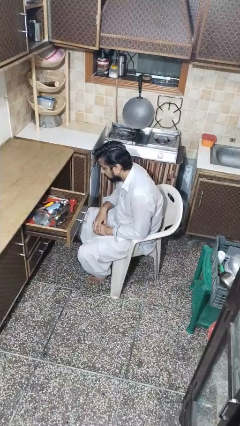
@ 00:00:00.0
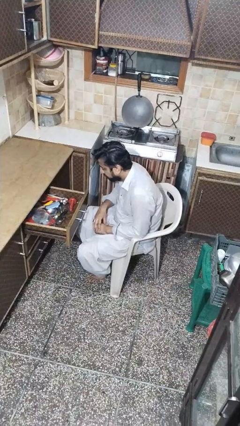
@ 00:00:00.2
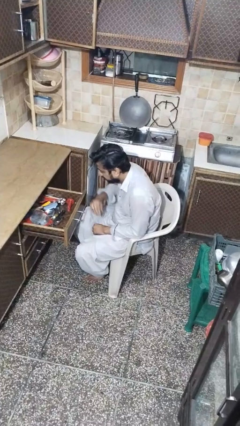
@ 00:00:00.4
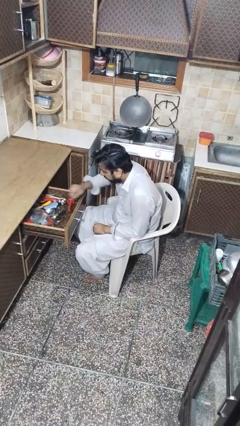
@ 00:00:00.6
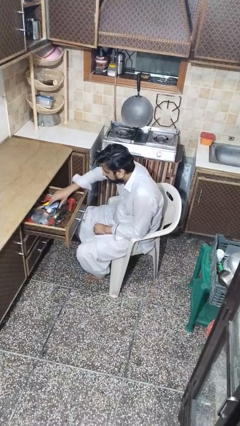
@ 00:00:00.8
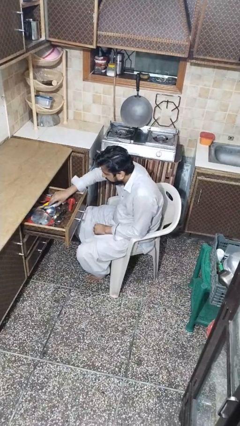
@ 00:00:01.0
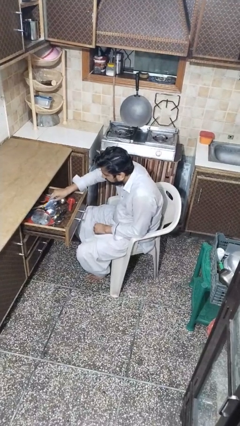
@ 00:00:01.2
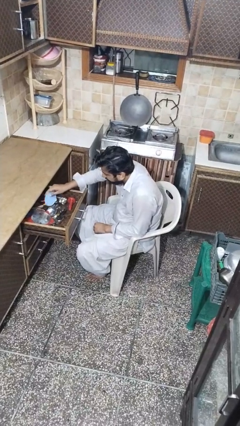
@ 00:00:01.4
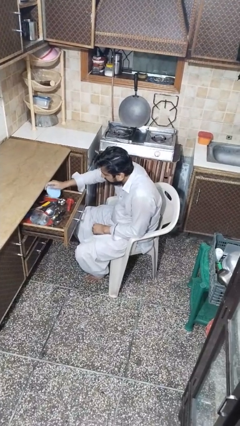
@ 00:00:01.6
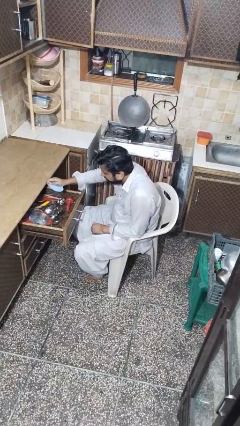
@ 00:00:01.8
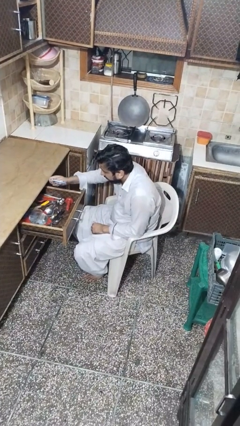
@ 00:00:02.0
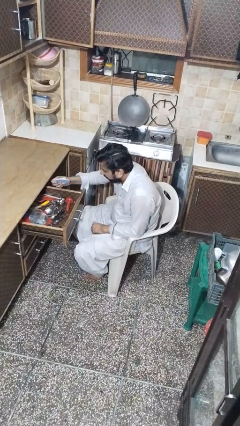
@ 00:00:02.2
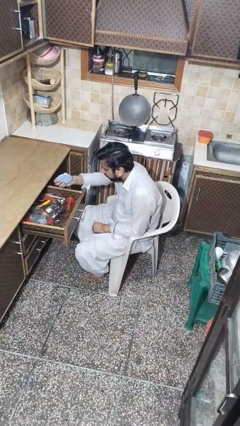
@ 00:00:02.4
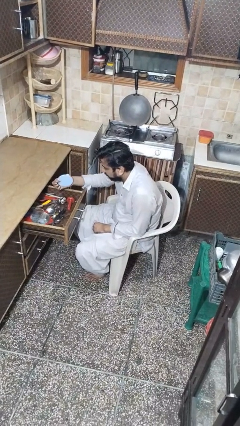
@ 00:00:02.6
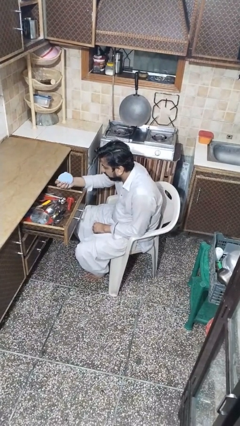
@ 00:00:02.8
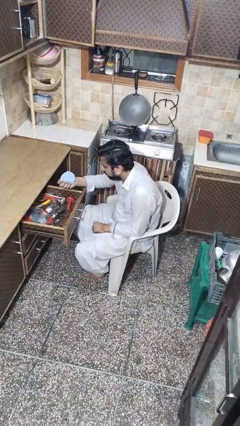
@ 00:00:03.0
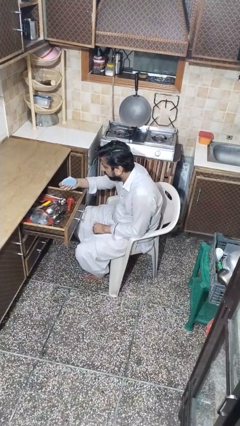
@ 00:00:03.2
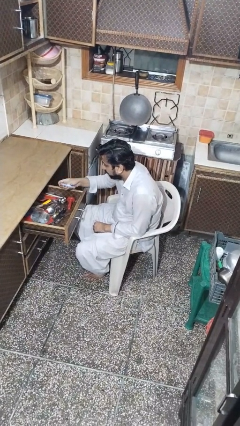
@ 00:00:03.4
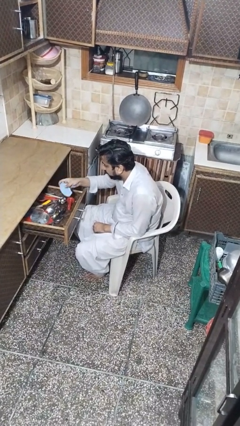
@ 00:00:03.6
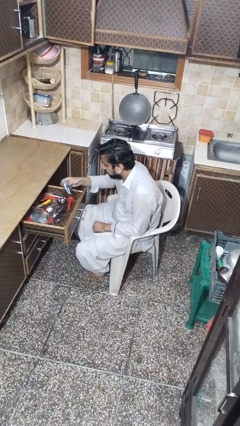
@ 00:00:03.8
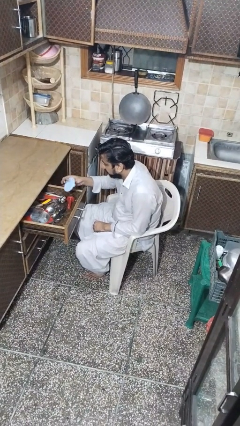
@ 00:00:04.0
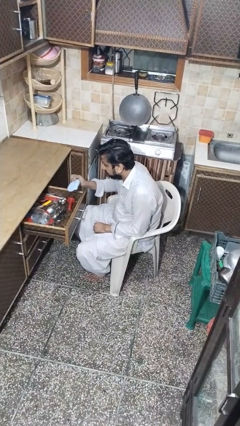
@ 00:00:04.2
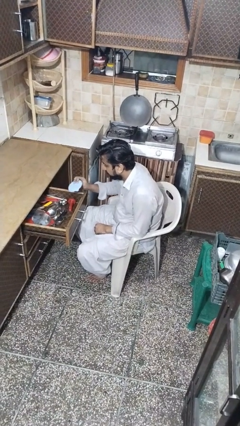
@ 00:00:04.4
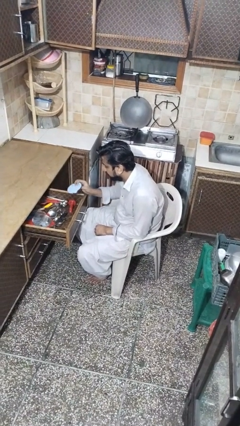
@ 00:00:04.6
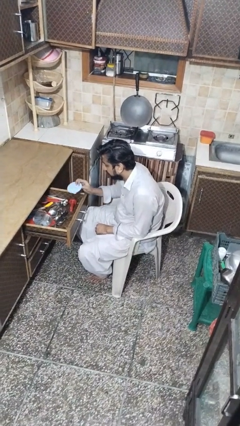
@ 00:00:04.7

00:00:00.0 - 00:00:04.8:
person takes object from kitchen drawer

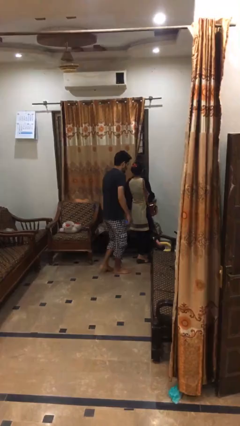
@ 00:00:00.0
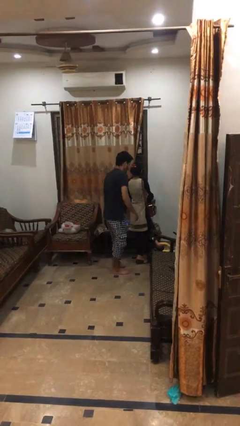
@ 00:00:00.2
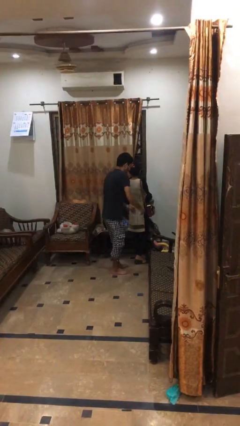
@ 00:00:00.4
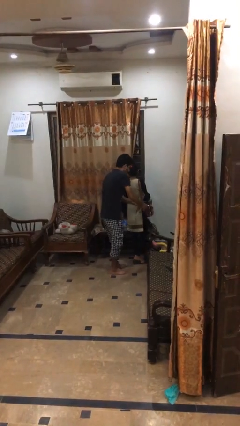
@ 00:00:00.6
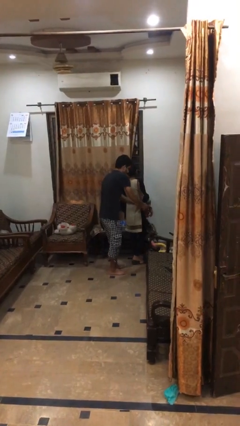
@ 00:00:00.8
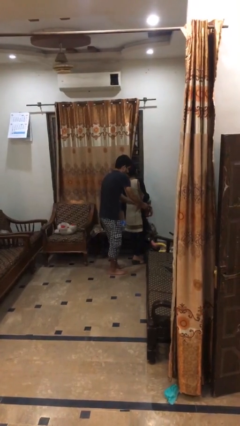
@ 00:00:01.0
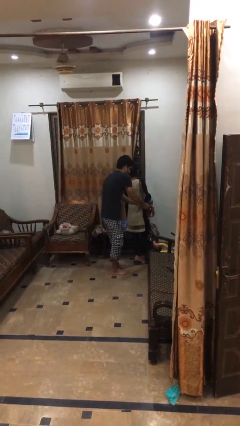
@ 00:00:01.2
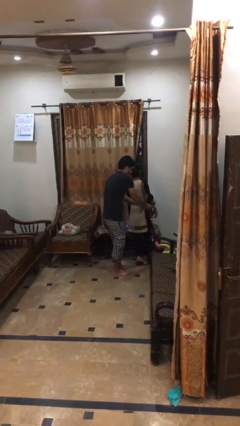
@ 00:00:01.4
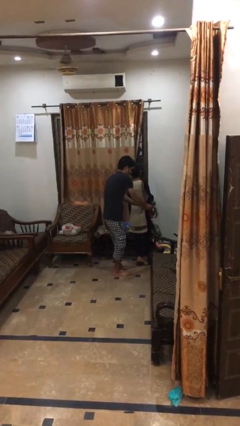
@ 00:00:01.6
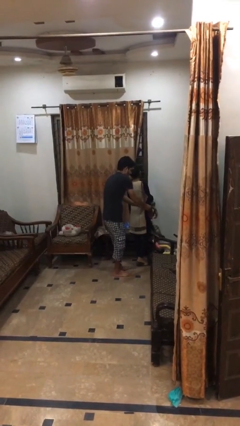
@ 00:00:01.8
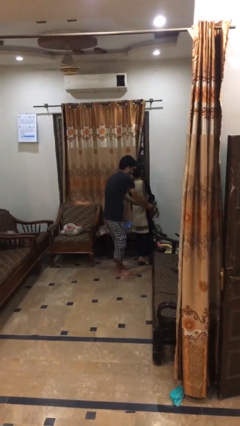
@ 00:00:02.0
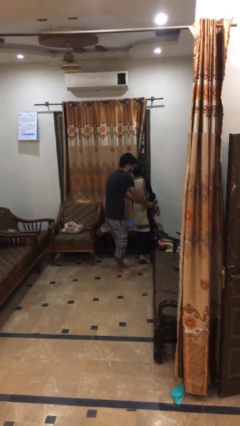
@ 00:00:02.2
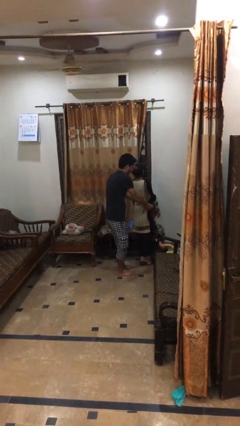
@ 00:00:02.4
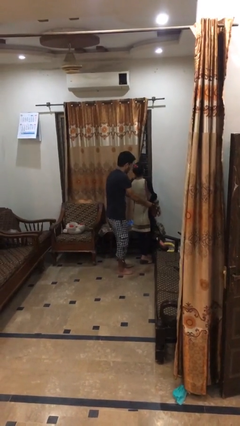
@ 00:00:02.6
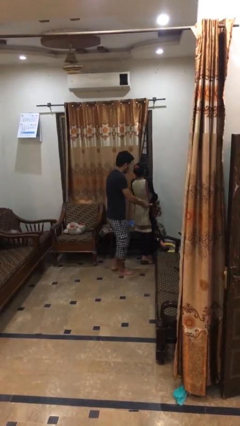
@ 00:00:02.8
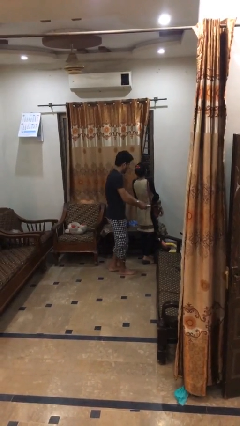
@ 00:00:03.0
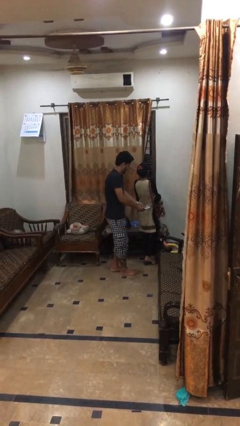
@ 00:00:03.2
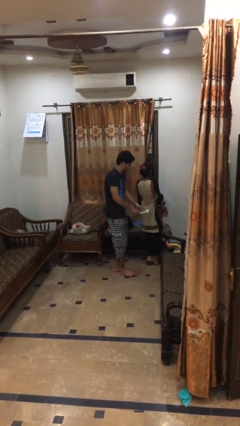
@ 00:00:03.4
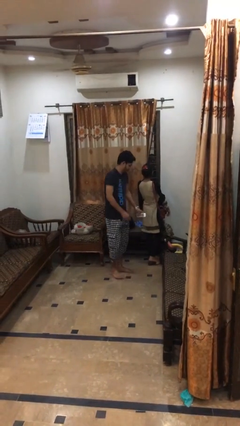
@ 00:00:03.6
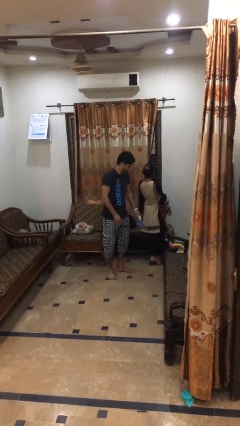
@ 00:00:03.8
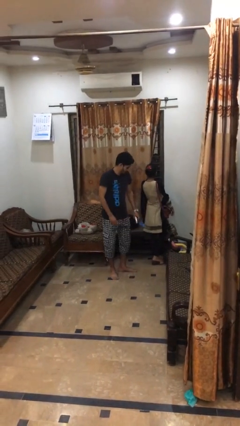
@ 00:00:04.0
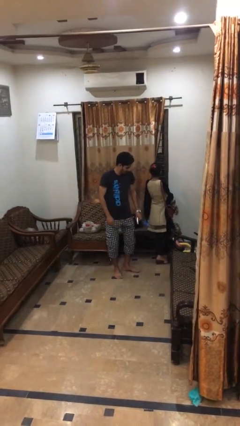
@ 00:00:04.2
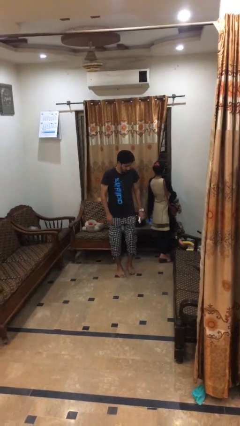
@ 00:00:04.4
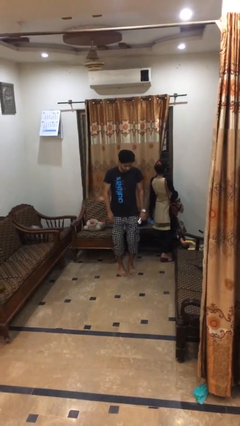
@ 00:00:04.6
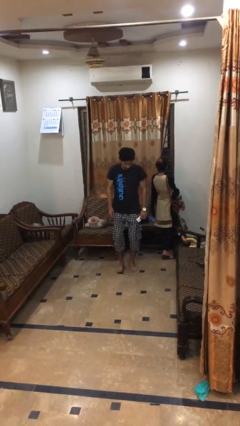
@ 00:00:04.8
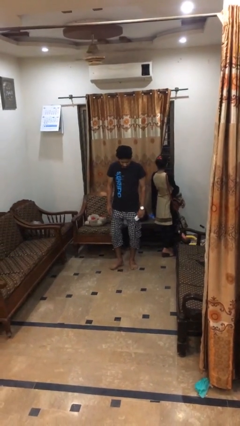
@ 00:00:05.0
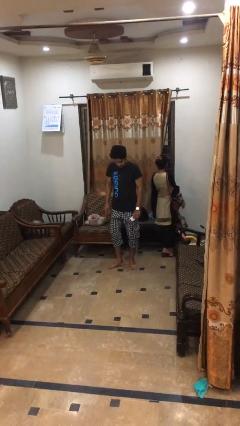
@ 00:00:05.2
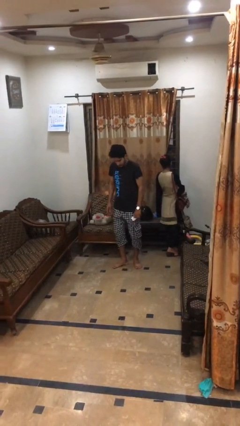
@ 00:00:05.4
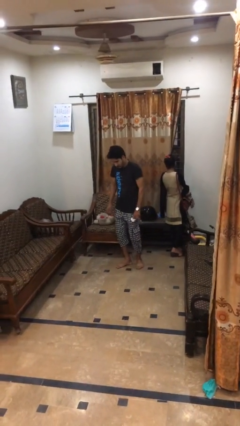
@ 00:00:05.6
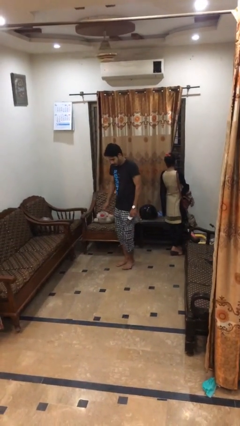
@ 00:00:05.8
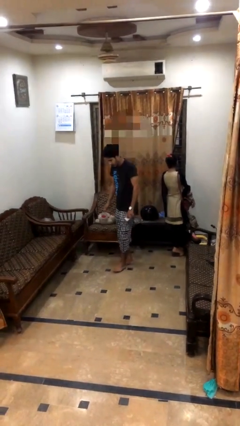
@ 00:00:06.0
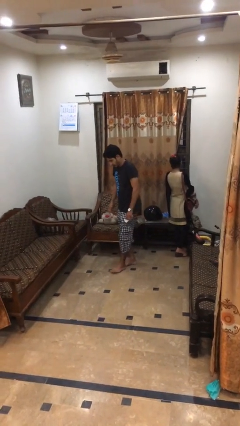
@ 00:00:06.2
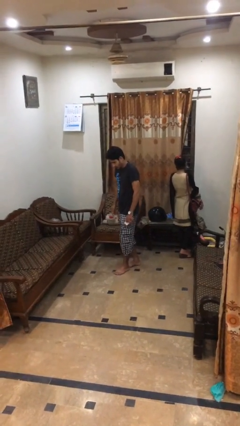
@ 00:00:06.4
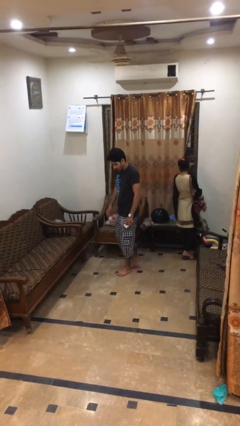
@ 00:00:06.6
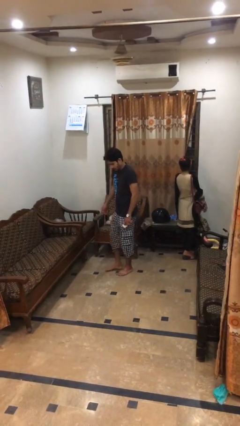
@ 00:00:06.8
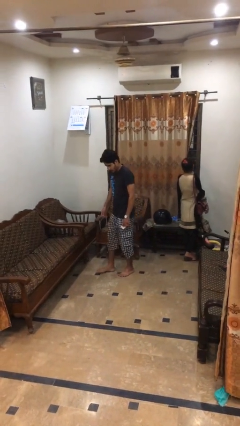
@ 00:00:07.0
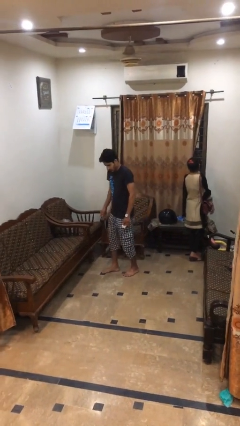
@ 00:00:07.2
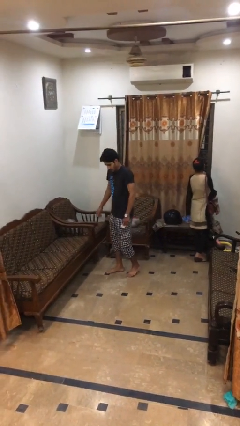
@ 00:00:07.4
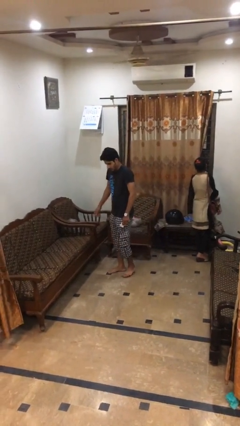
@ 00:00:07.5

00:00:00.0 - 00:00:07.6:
person steals object from person

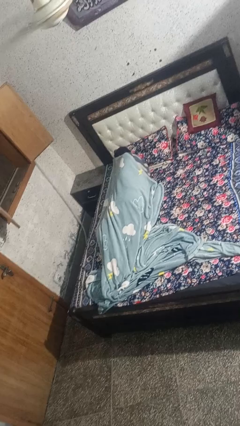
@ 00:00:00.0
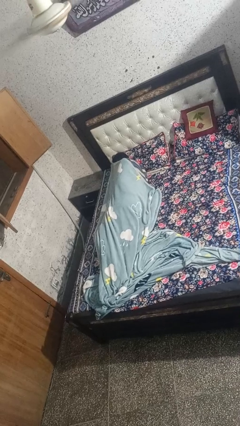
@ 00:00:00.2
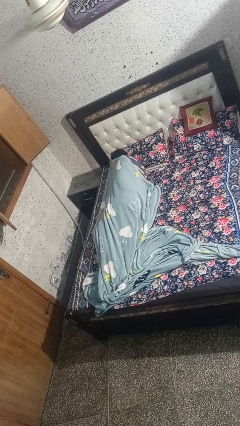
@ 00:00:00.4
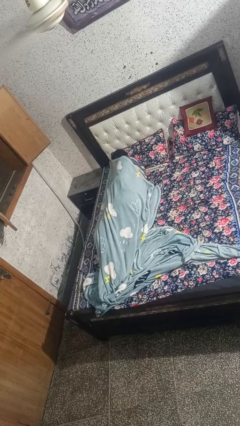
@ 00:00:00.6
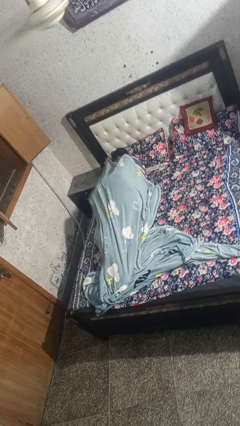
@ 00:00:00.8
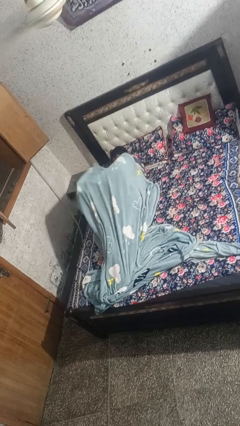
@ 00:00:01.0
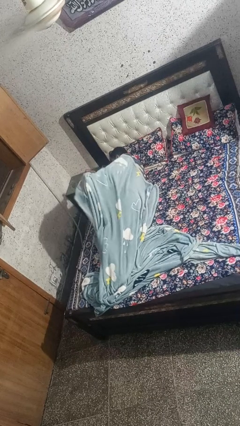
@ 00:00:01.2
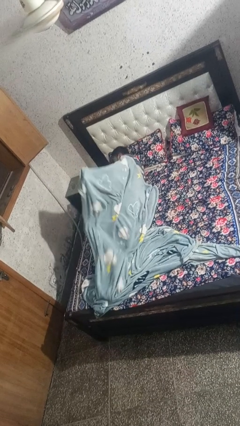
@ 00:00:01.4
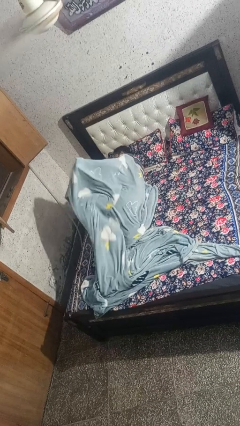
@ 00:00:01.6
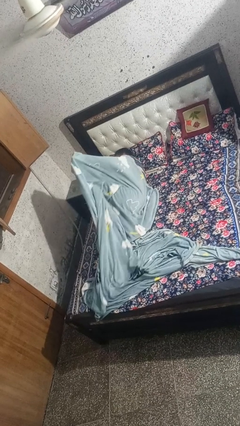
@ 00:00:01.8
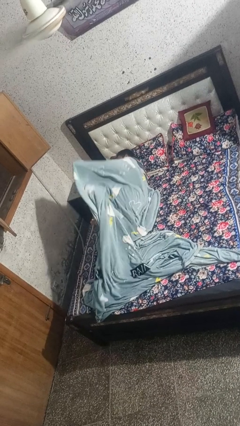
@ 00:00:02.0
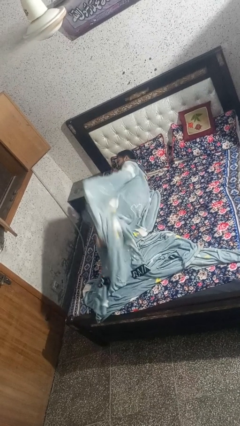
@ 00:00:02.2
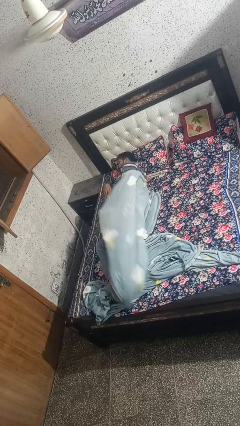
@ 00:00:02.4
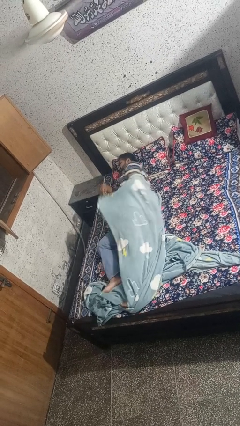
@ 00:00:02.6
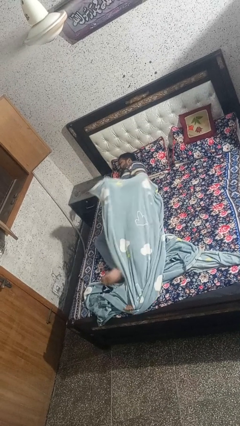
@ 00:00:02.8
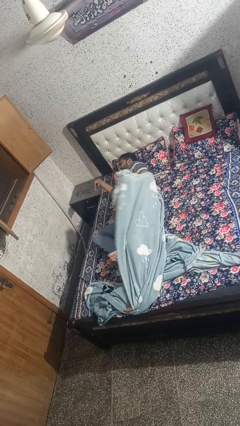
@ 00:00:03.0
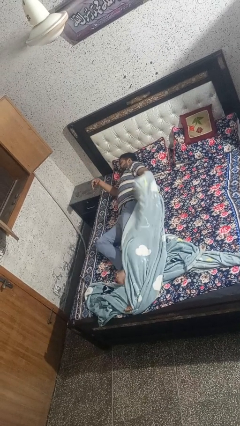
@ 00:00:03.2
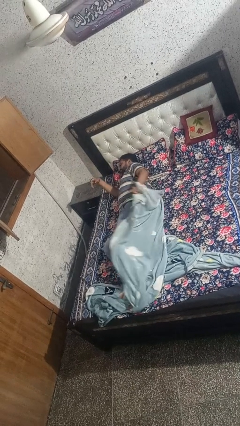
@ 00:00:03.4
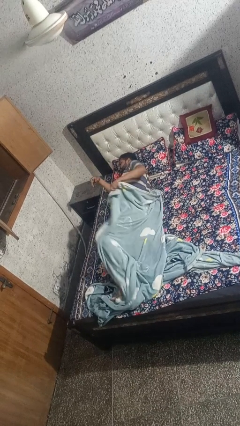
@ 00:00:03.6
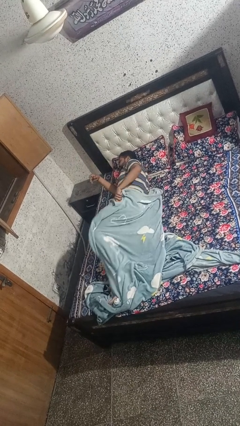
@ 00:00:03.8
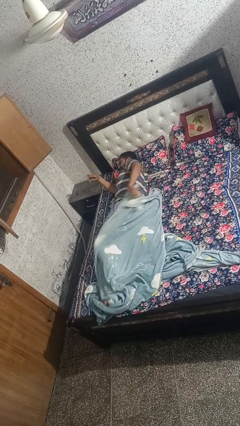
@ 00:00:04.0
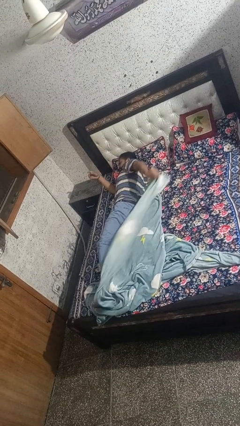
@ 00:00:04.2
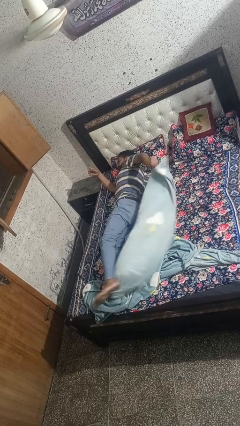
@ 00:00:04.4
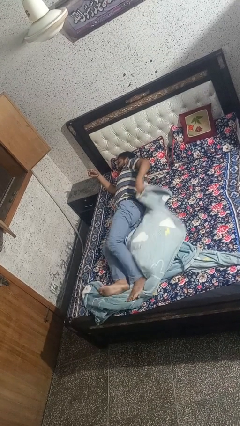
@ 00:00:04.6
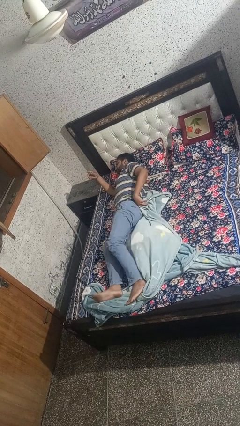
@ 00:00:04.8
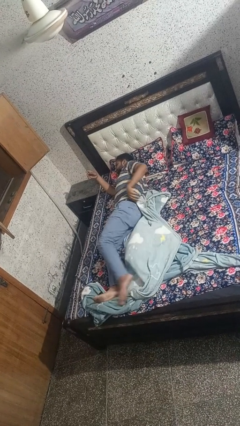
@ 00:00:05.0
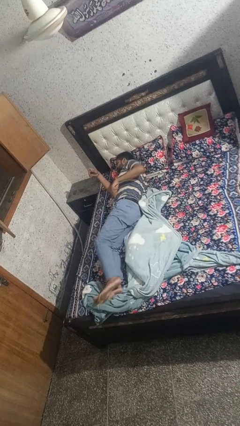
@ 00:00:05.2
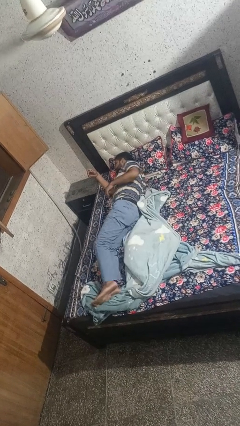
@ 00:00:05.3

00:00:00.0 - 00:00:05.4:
person uncovers with bedsheets
